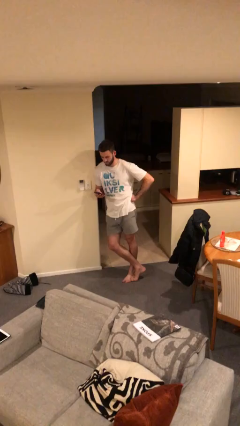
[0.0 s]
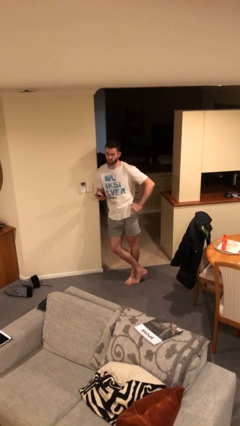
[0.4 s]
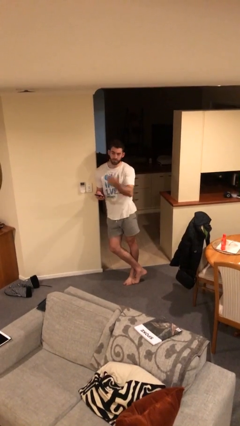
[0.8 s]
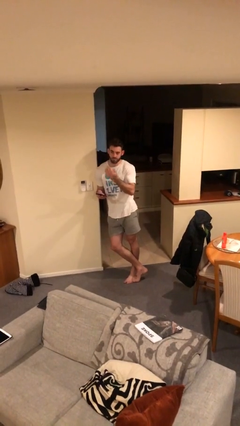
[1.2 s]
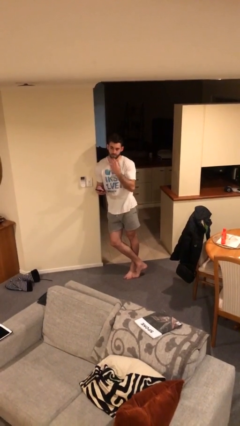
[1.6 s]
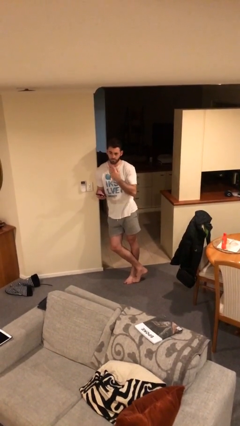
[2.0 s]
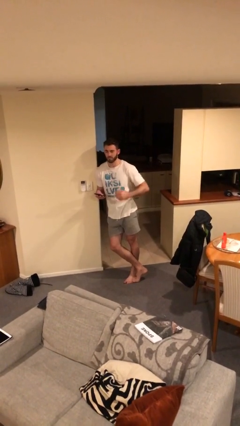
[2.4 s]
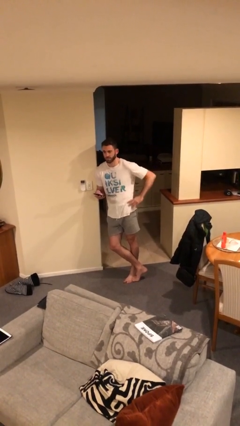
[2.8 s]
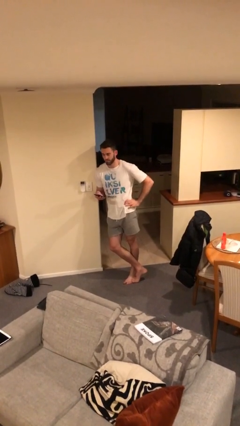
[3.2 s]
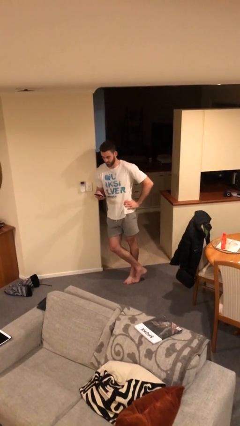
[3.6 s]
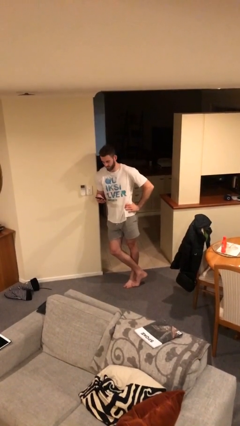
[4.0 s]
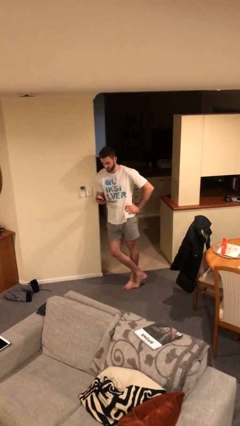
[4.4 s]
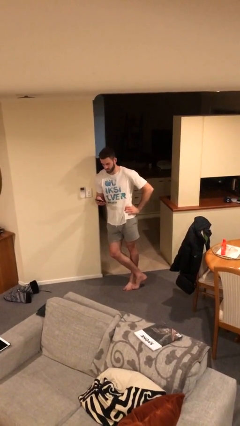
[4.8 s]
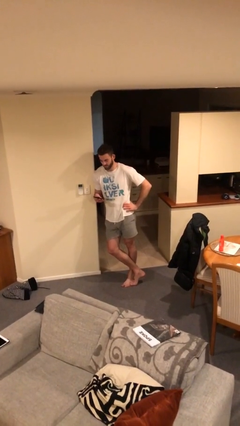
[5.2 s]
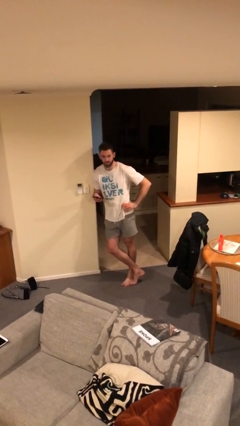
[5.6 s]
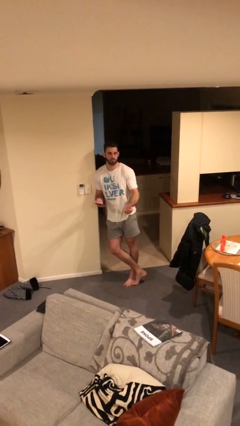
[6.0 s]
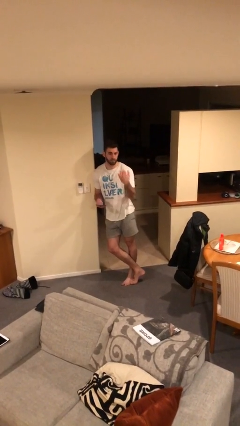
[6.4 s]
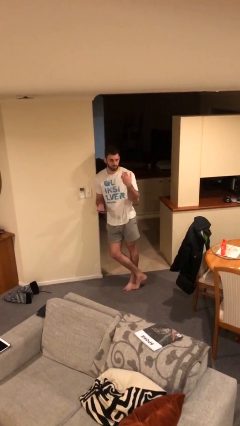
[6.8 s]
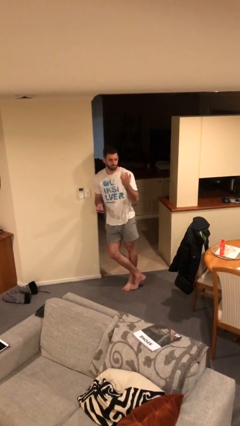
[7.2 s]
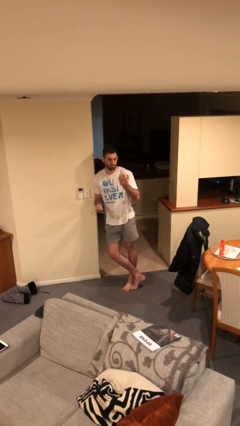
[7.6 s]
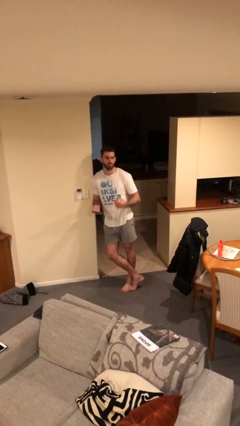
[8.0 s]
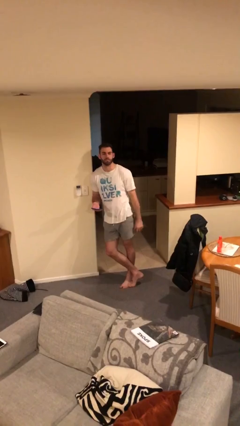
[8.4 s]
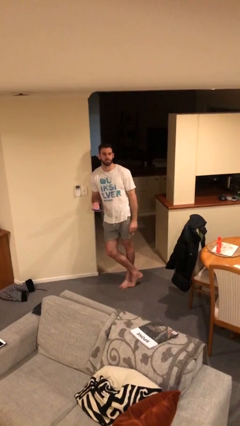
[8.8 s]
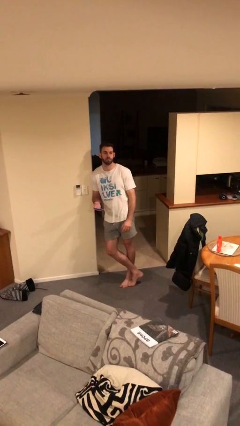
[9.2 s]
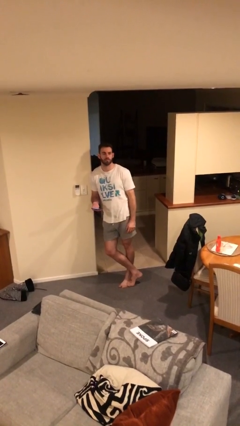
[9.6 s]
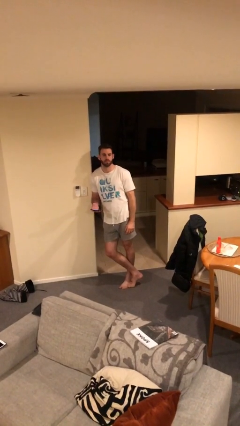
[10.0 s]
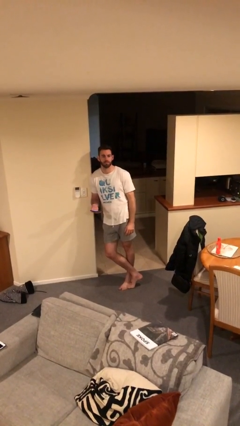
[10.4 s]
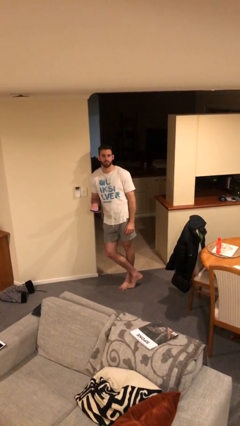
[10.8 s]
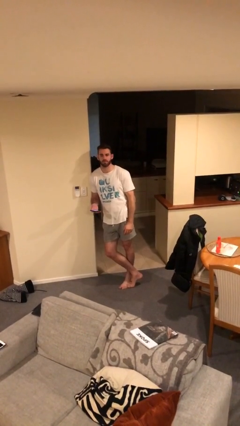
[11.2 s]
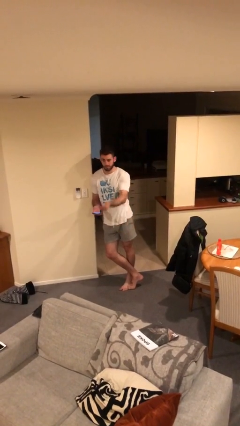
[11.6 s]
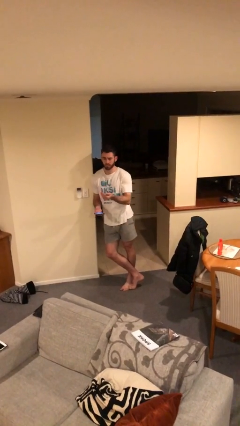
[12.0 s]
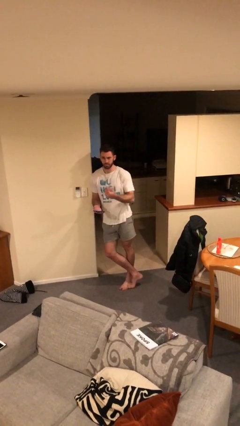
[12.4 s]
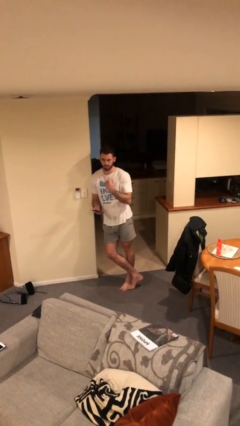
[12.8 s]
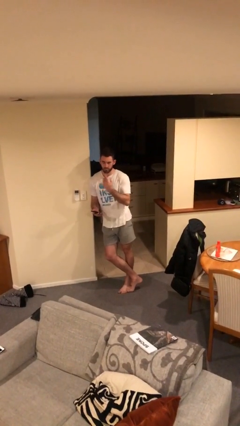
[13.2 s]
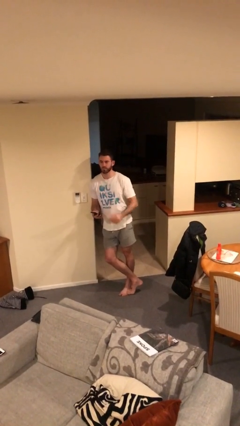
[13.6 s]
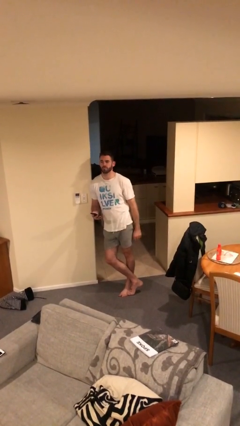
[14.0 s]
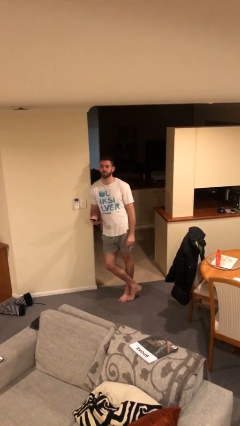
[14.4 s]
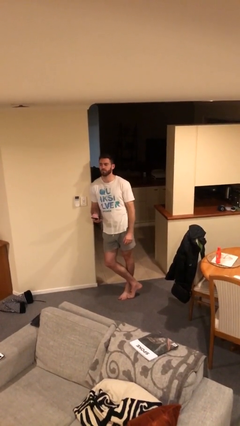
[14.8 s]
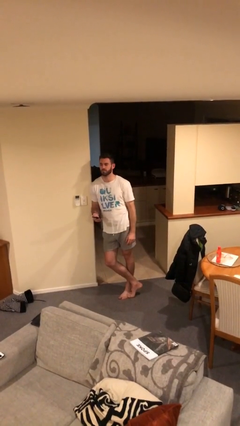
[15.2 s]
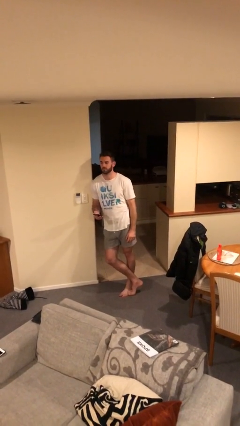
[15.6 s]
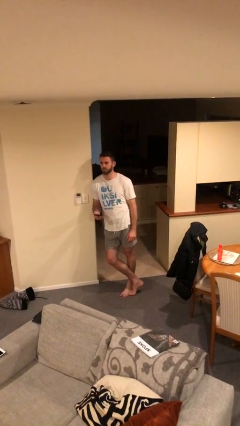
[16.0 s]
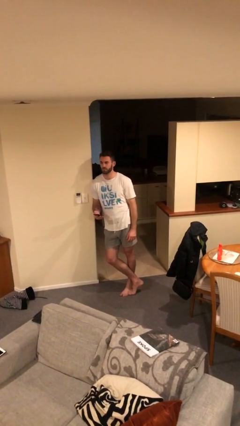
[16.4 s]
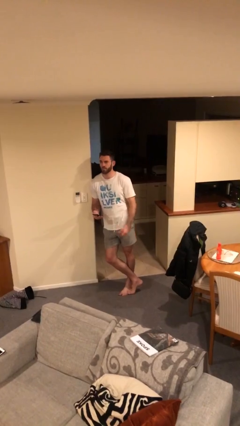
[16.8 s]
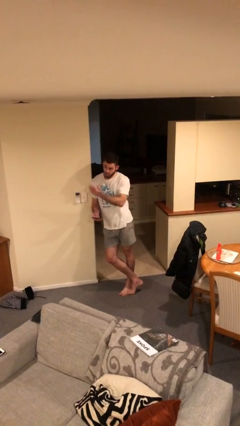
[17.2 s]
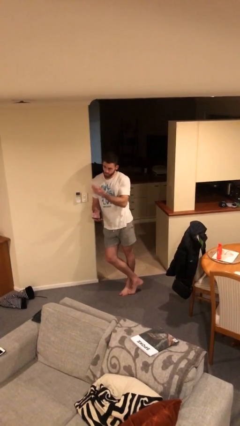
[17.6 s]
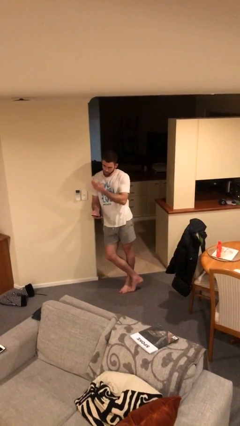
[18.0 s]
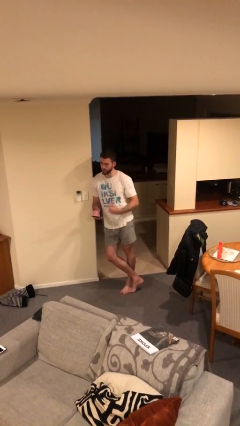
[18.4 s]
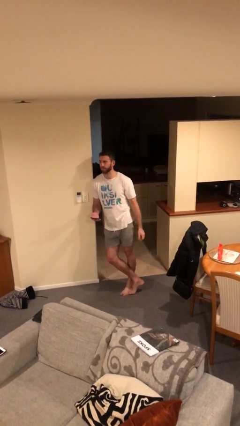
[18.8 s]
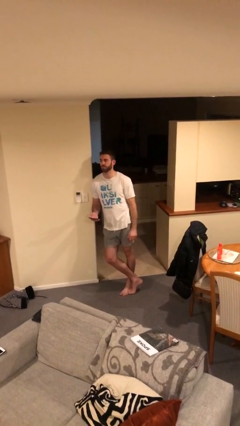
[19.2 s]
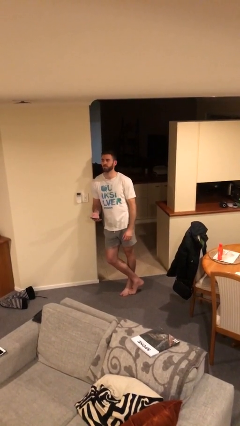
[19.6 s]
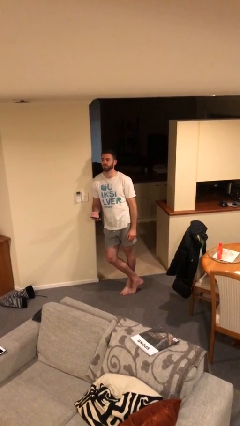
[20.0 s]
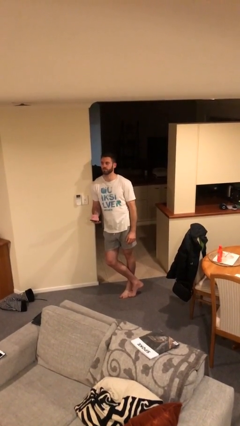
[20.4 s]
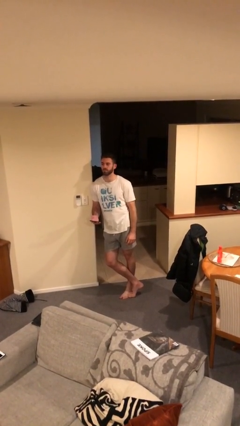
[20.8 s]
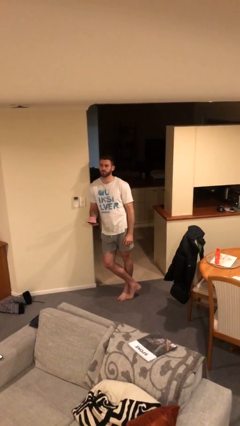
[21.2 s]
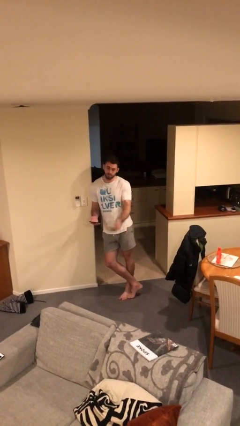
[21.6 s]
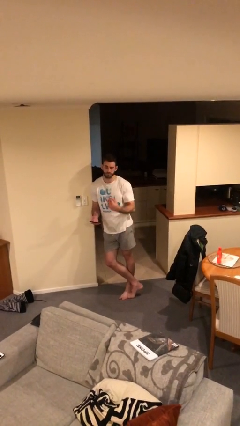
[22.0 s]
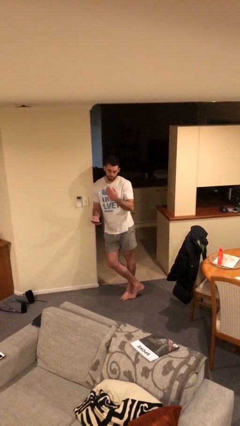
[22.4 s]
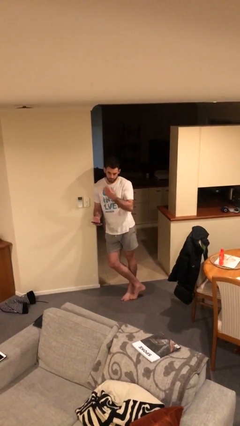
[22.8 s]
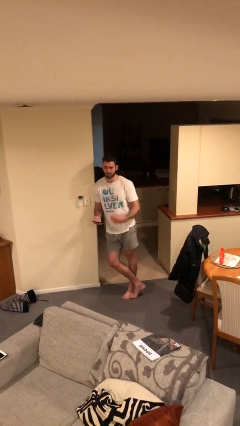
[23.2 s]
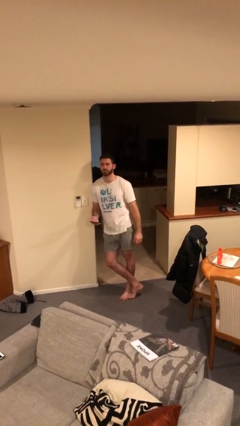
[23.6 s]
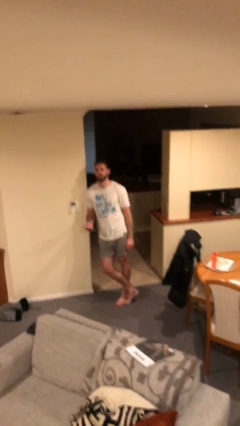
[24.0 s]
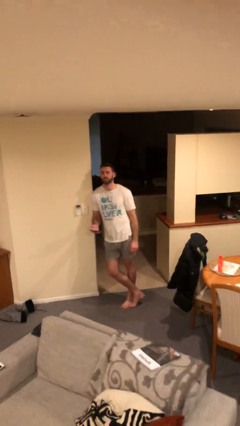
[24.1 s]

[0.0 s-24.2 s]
person gestures come here

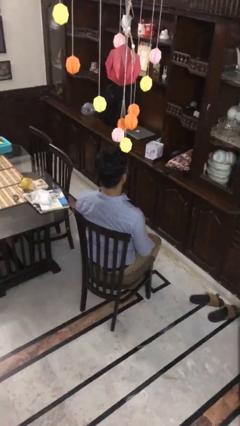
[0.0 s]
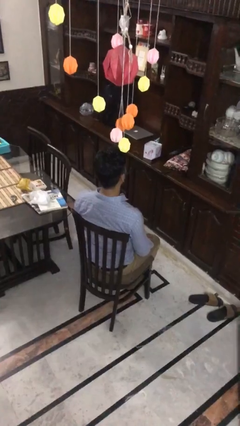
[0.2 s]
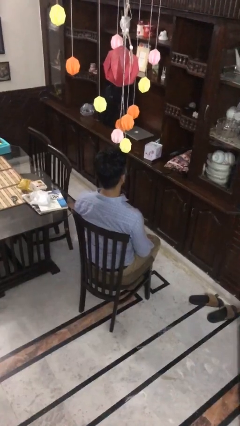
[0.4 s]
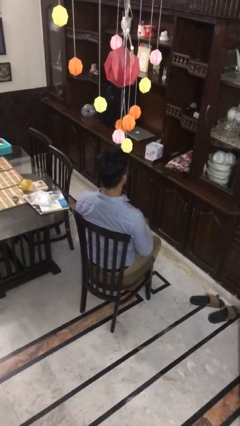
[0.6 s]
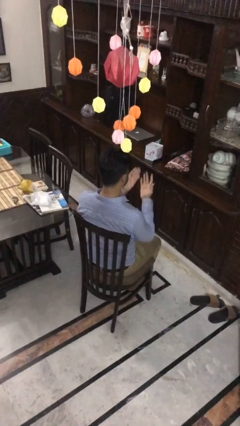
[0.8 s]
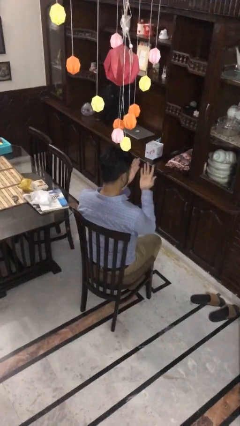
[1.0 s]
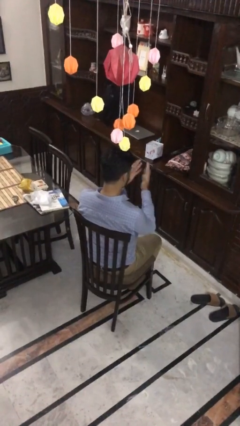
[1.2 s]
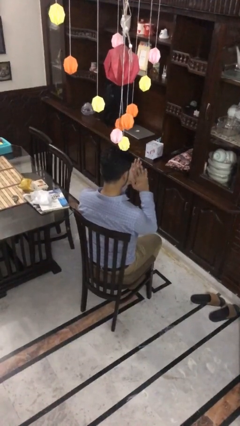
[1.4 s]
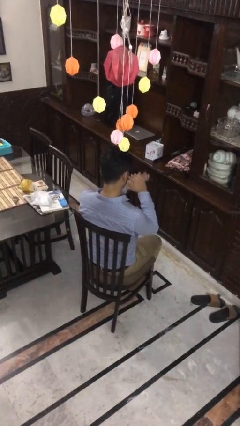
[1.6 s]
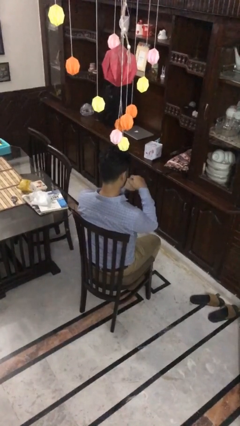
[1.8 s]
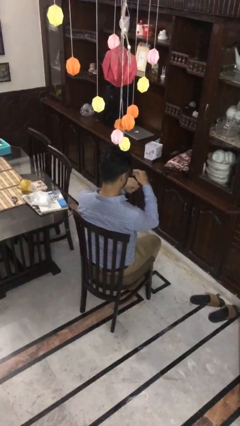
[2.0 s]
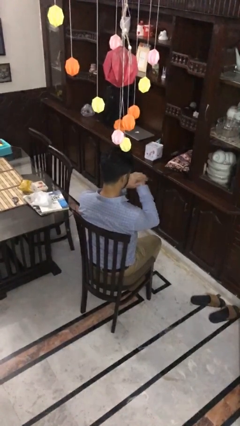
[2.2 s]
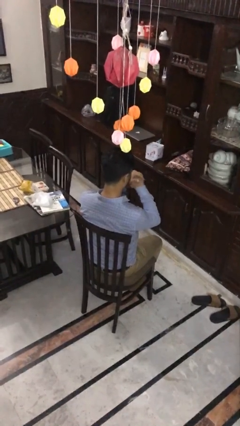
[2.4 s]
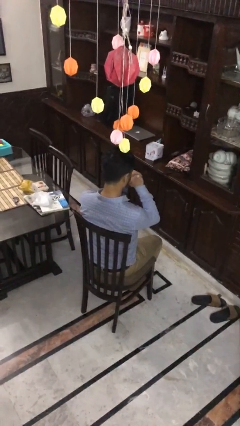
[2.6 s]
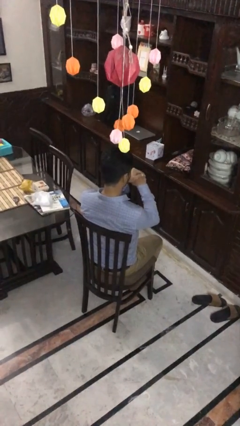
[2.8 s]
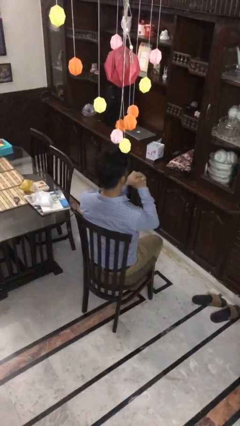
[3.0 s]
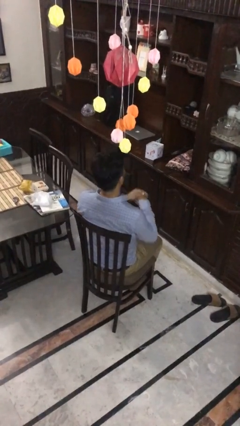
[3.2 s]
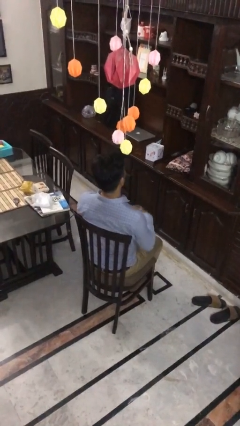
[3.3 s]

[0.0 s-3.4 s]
person looks at hands in lap

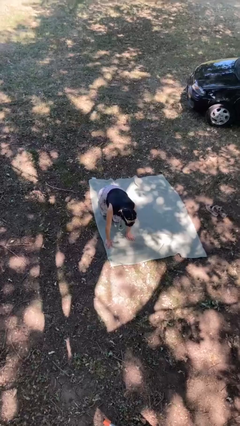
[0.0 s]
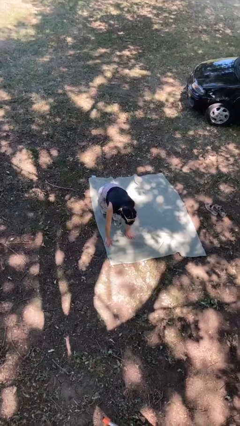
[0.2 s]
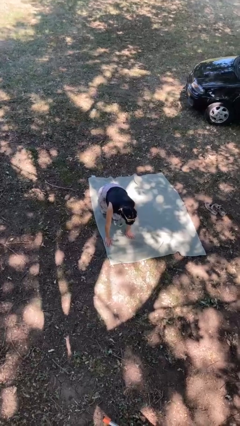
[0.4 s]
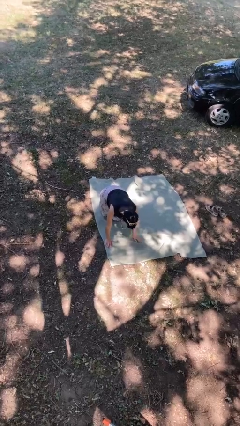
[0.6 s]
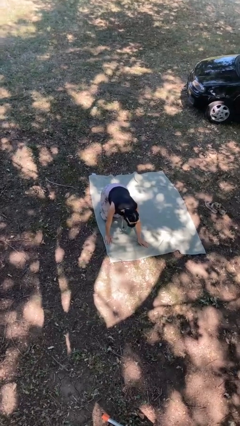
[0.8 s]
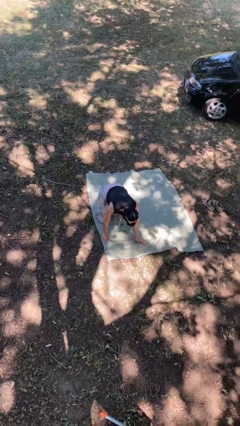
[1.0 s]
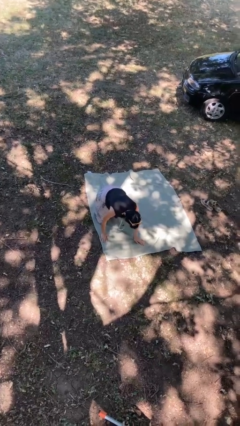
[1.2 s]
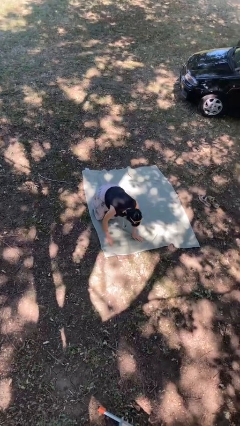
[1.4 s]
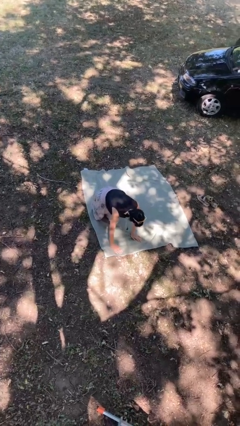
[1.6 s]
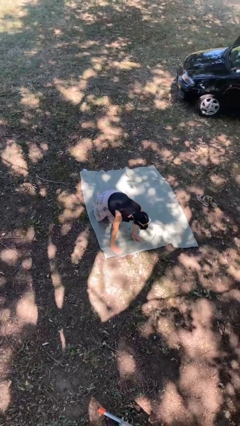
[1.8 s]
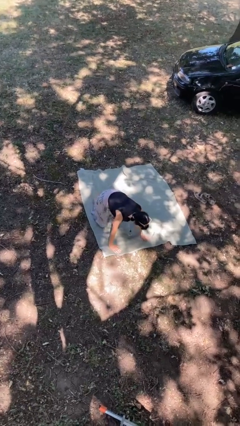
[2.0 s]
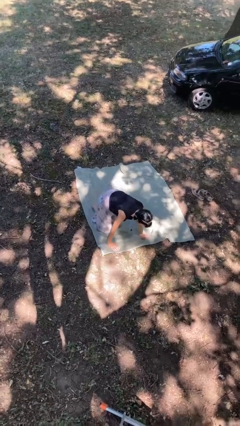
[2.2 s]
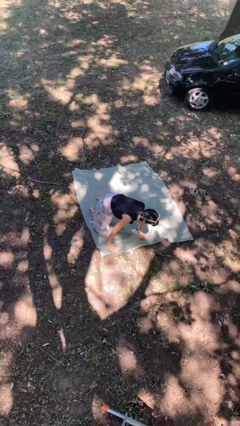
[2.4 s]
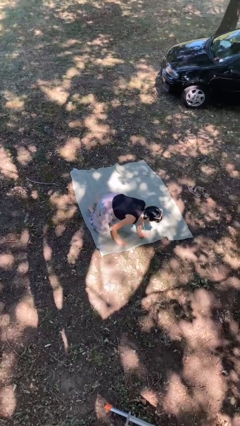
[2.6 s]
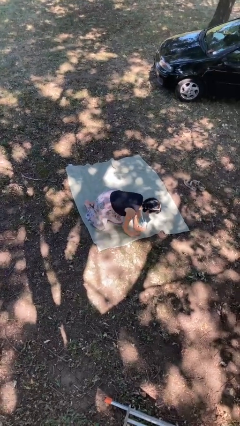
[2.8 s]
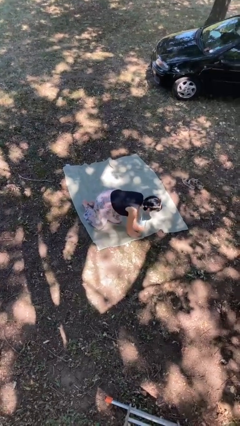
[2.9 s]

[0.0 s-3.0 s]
person crawls
